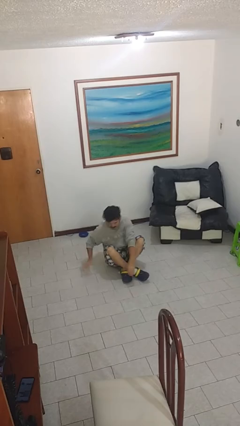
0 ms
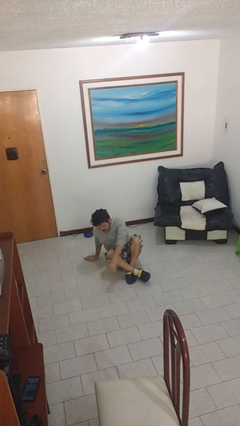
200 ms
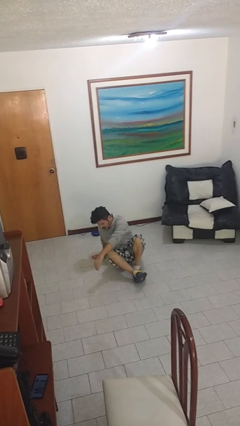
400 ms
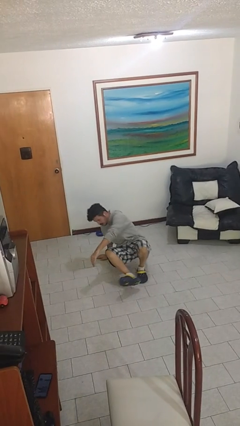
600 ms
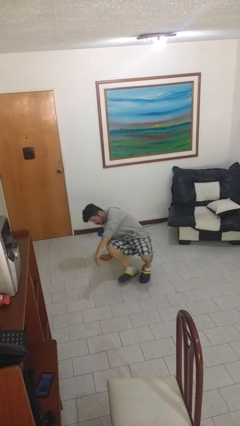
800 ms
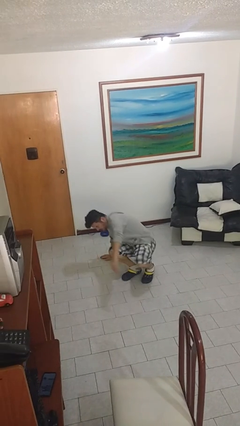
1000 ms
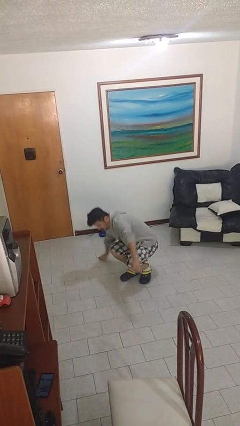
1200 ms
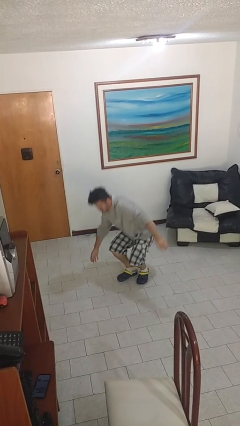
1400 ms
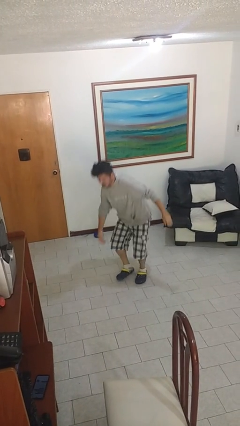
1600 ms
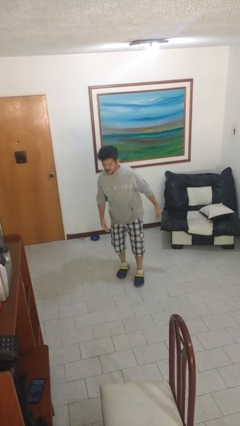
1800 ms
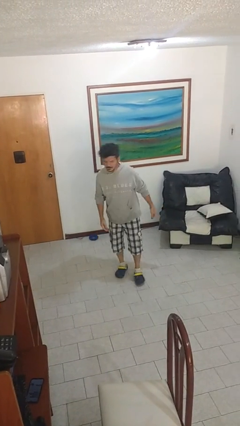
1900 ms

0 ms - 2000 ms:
person stands up from floor

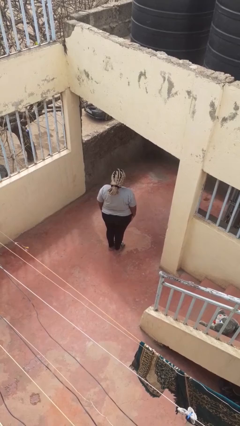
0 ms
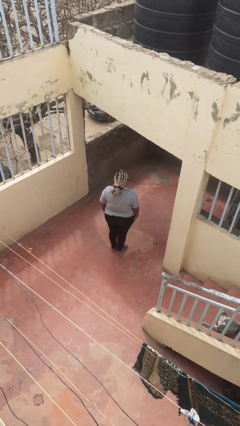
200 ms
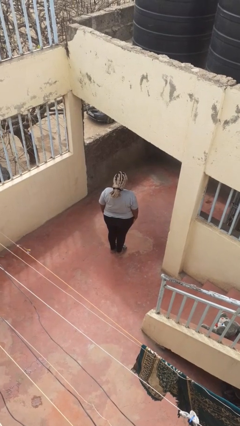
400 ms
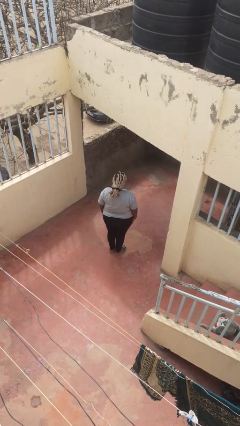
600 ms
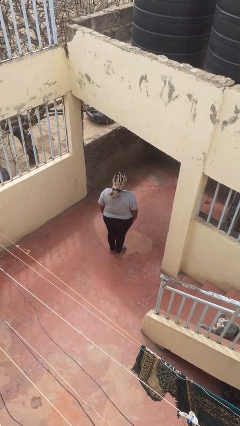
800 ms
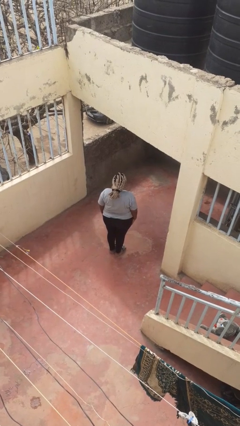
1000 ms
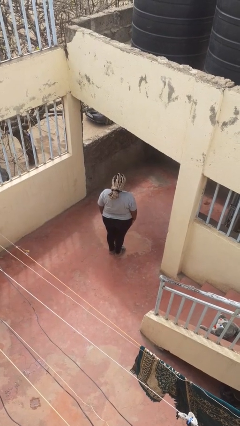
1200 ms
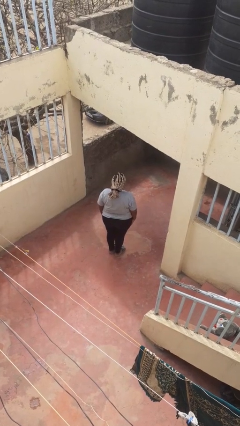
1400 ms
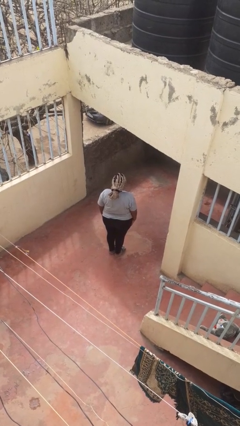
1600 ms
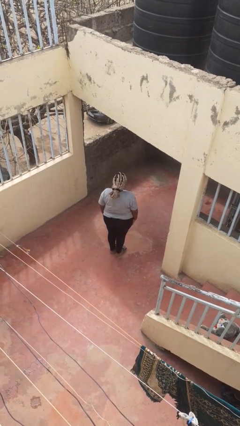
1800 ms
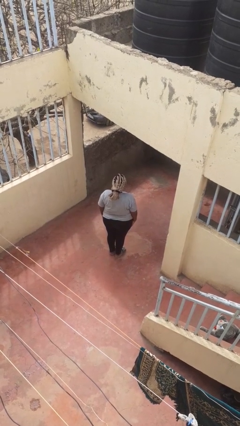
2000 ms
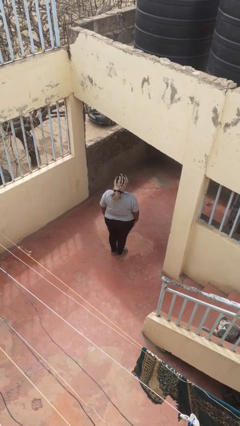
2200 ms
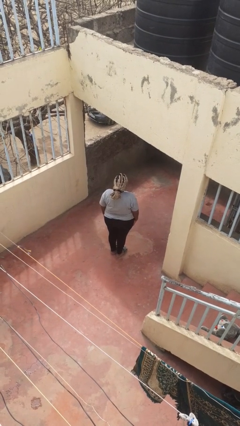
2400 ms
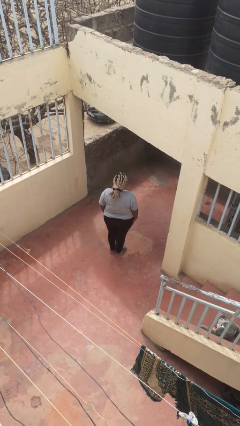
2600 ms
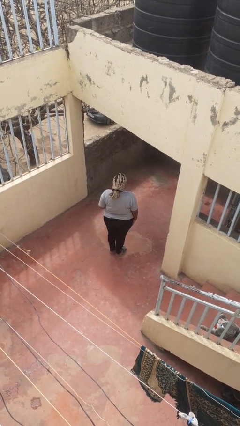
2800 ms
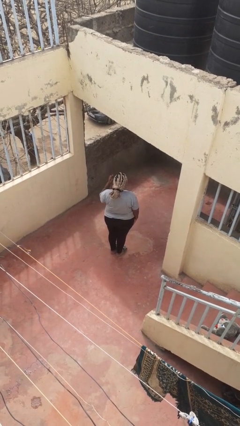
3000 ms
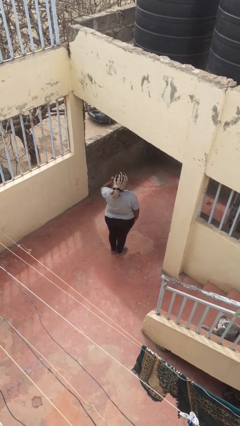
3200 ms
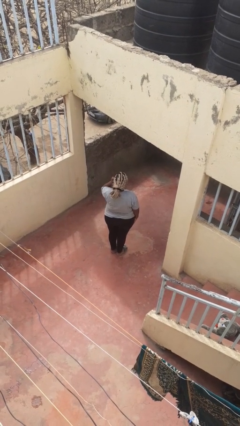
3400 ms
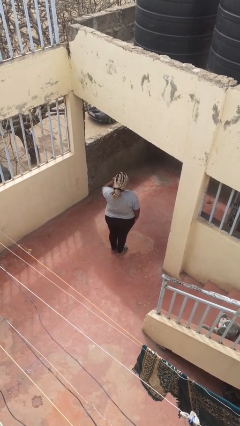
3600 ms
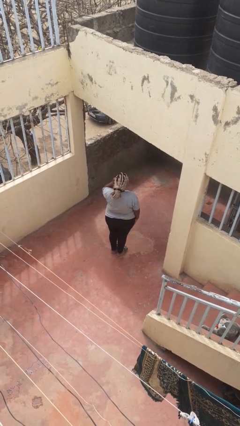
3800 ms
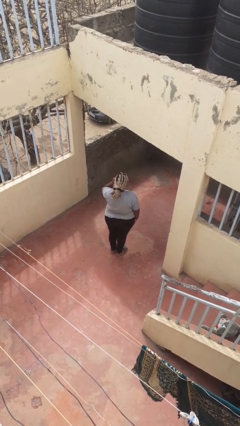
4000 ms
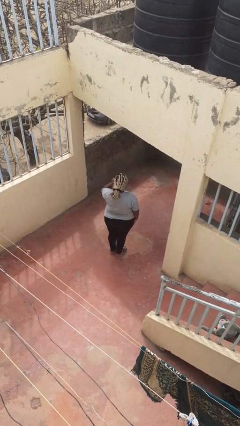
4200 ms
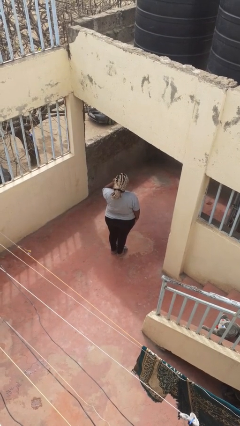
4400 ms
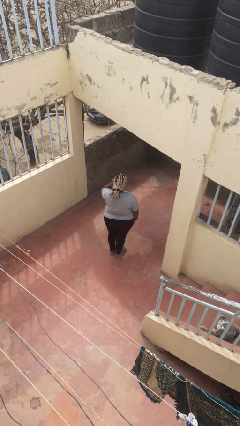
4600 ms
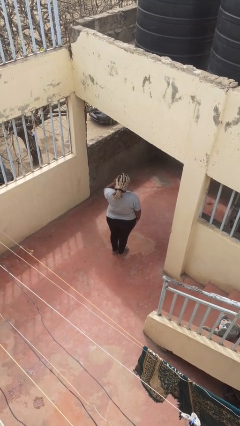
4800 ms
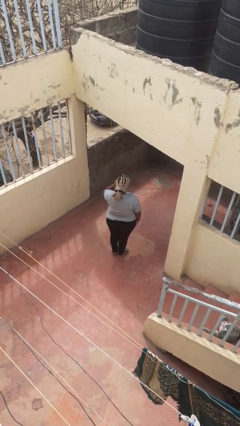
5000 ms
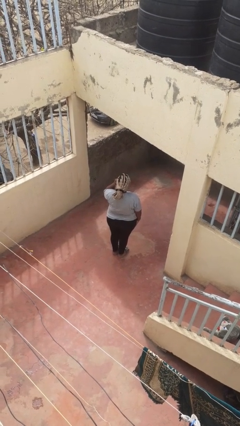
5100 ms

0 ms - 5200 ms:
person gestures listen closely

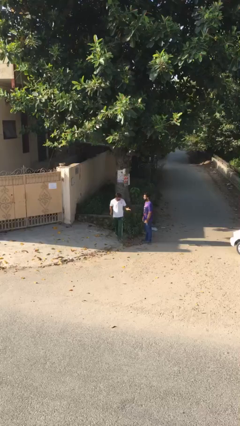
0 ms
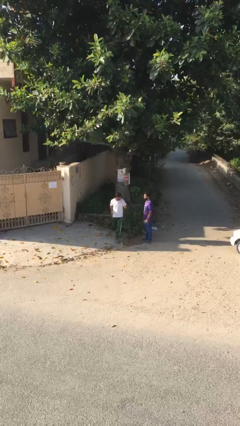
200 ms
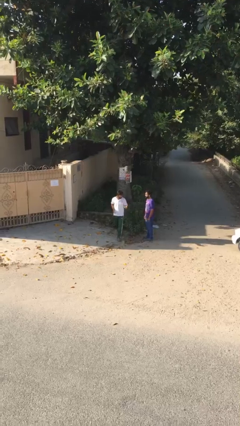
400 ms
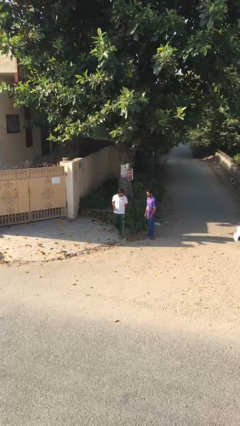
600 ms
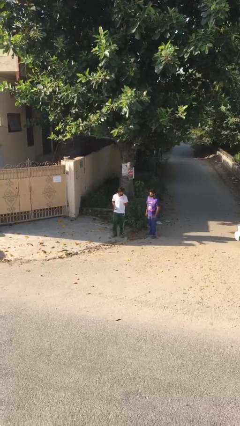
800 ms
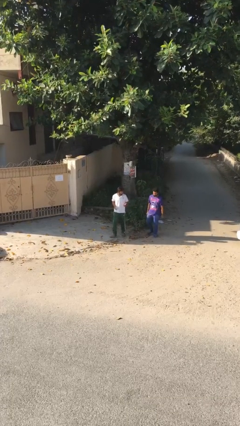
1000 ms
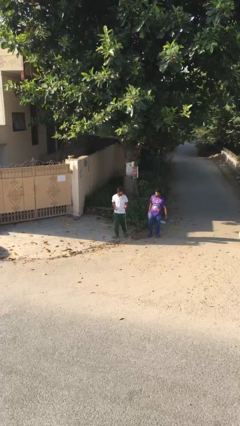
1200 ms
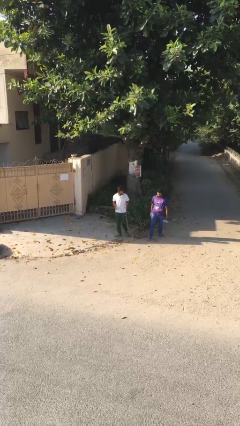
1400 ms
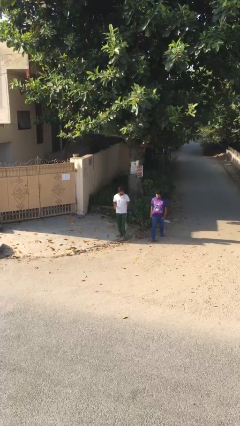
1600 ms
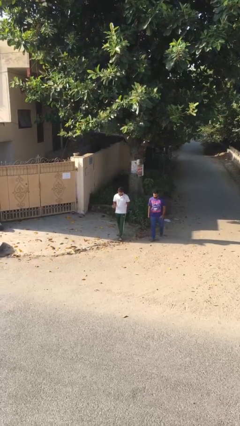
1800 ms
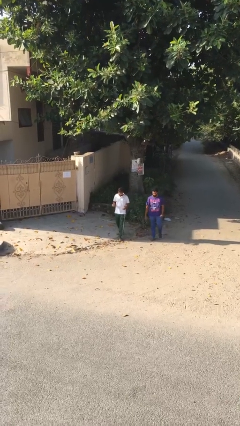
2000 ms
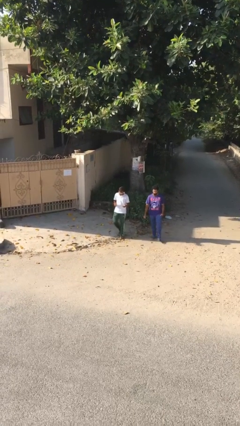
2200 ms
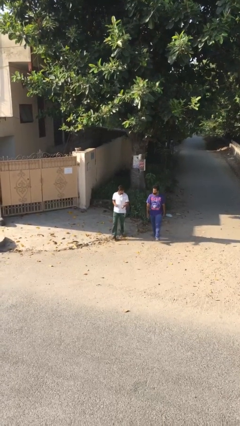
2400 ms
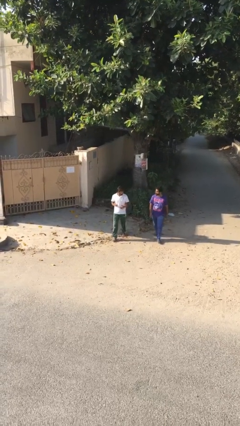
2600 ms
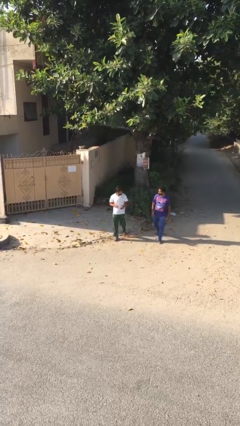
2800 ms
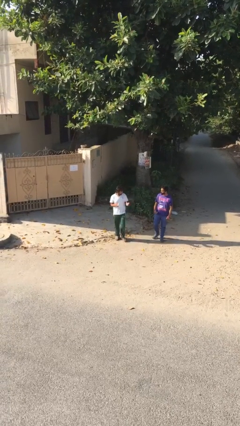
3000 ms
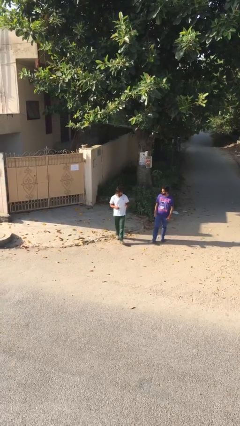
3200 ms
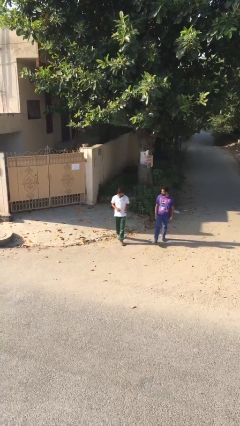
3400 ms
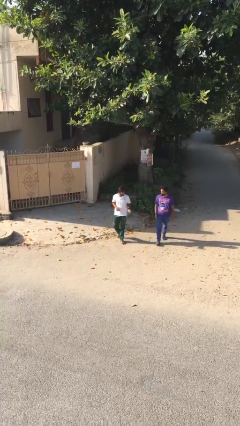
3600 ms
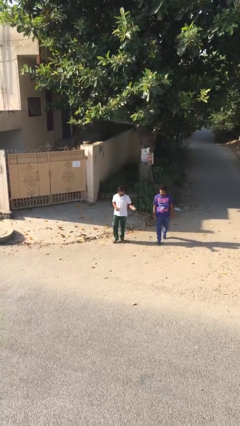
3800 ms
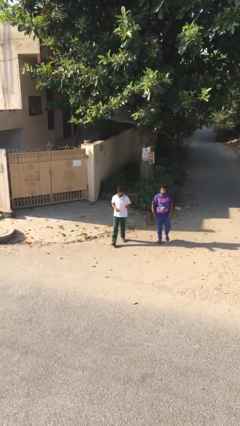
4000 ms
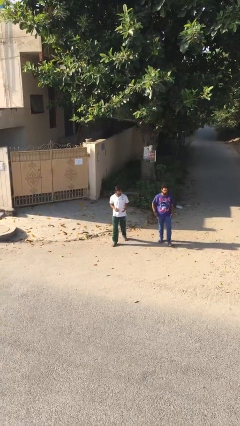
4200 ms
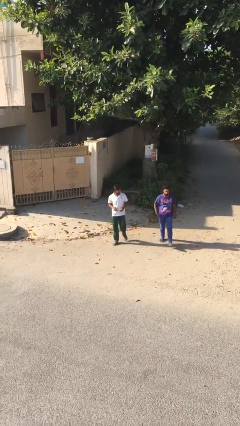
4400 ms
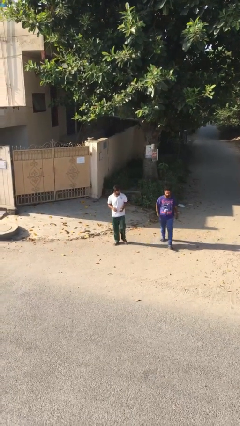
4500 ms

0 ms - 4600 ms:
person talks to person

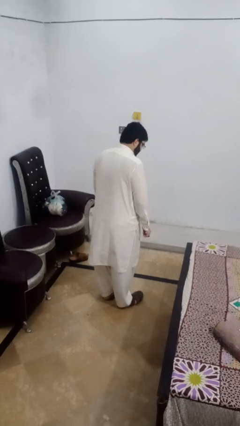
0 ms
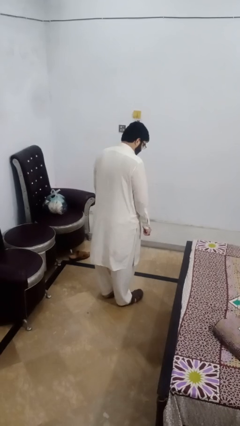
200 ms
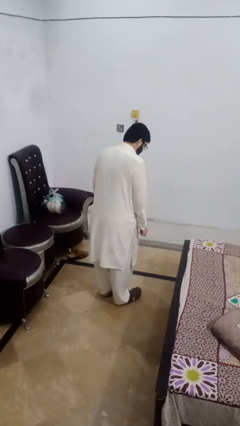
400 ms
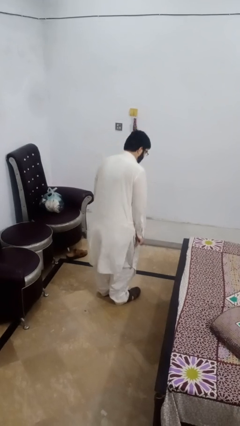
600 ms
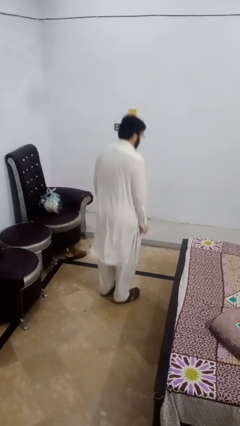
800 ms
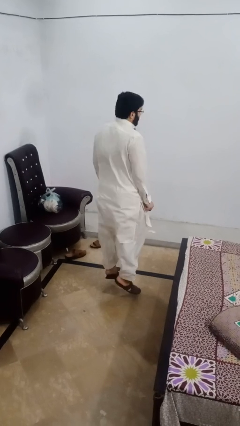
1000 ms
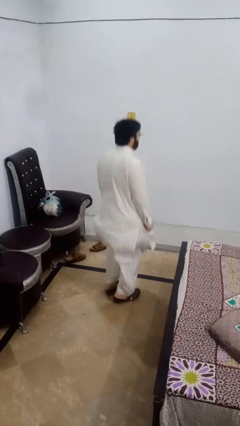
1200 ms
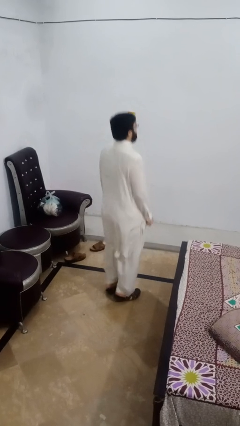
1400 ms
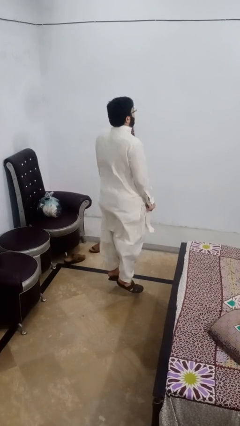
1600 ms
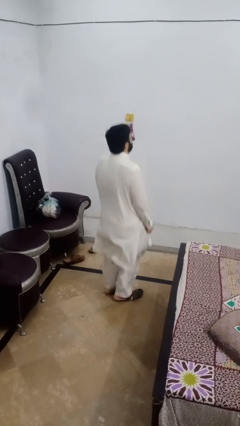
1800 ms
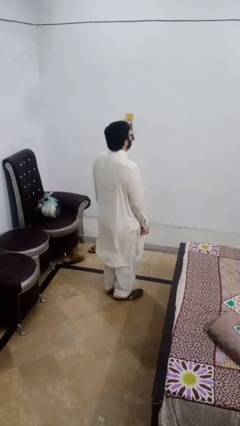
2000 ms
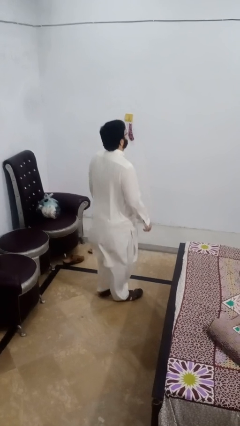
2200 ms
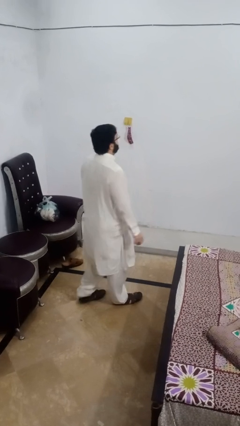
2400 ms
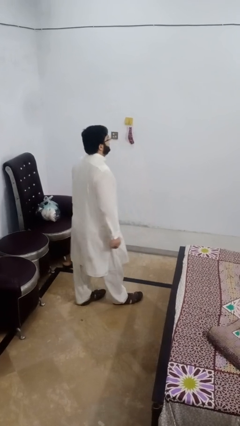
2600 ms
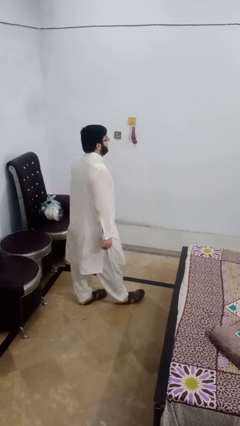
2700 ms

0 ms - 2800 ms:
person jumps

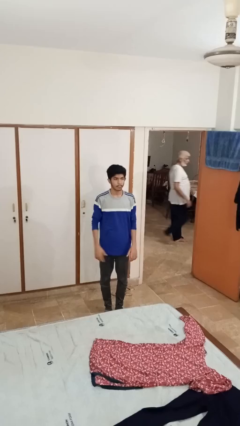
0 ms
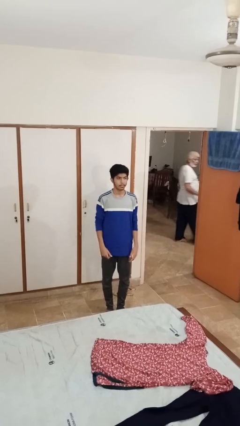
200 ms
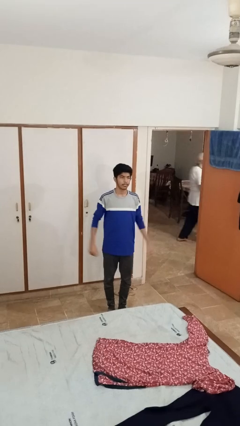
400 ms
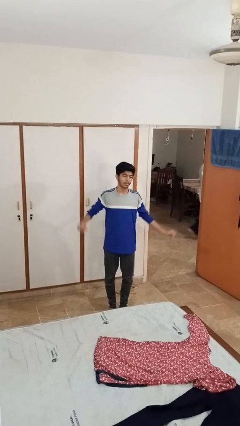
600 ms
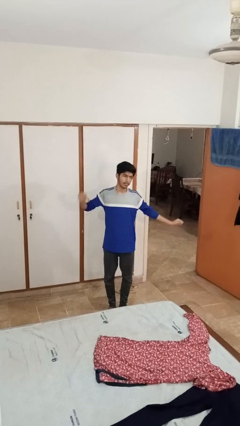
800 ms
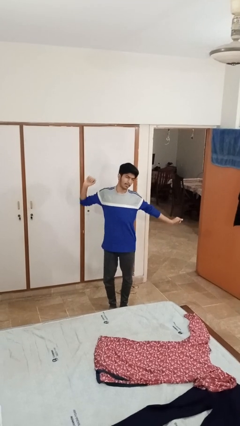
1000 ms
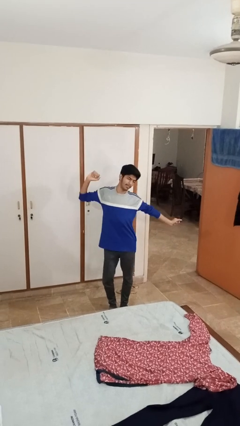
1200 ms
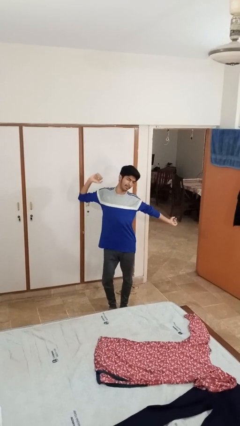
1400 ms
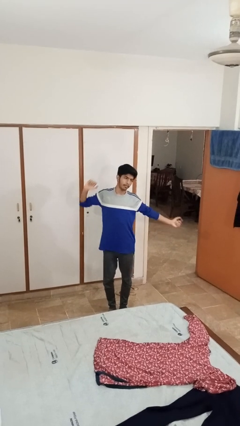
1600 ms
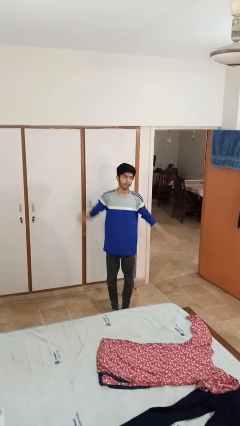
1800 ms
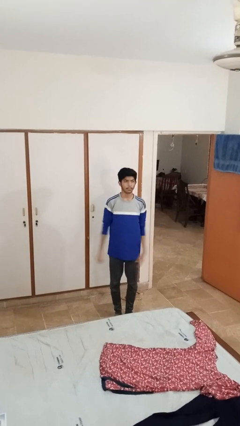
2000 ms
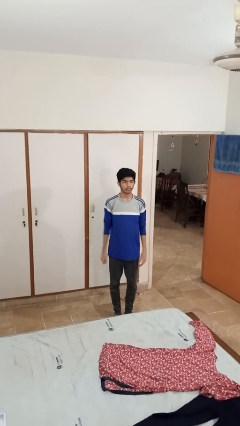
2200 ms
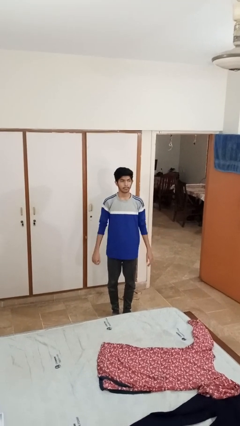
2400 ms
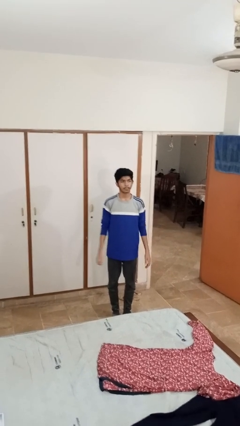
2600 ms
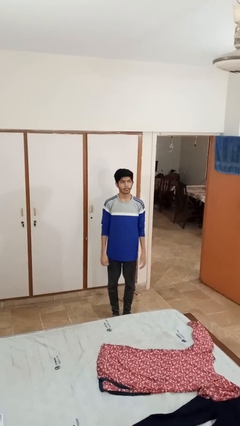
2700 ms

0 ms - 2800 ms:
person stretches arms to side

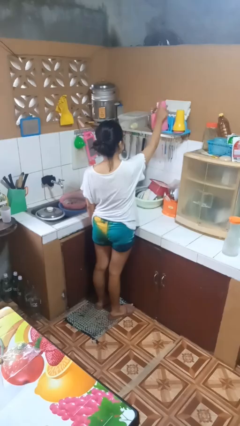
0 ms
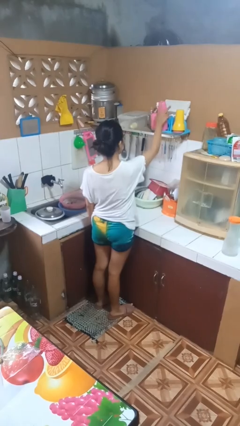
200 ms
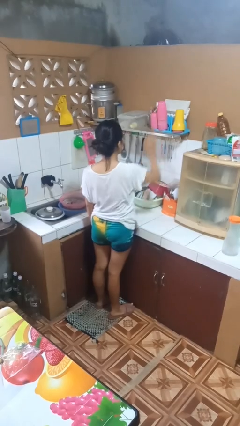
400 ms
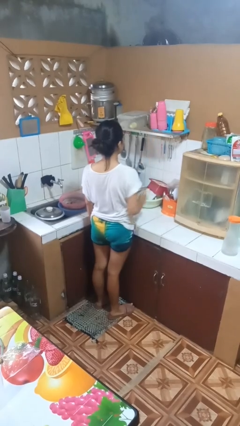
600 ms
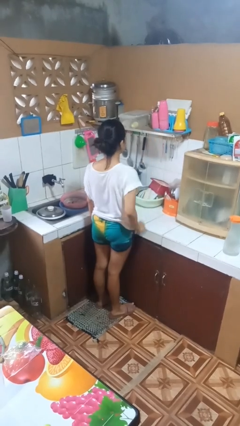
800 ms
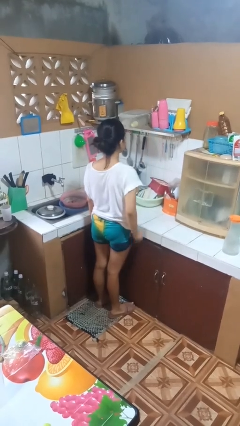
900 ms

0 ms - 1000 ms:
person puts down object on shelf
